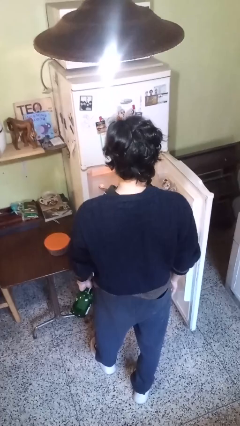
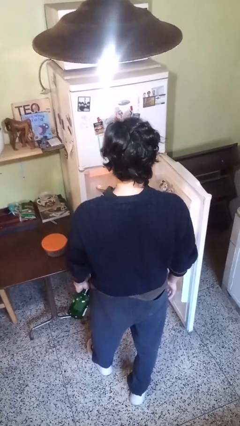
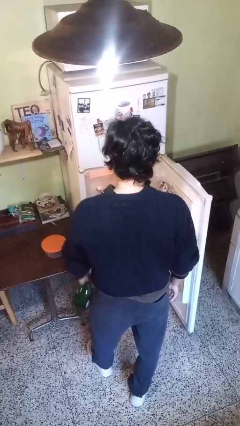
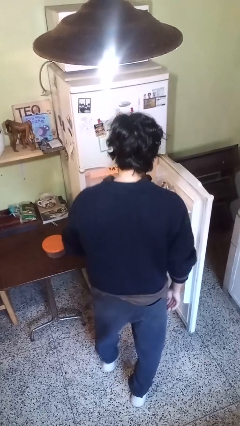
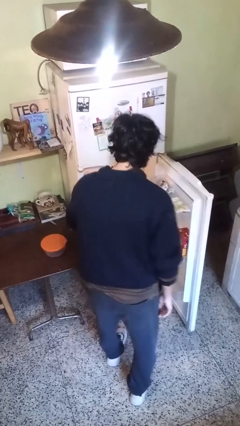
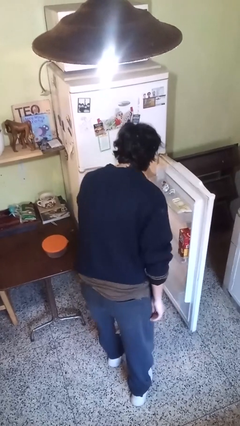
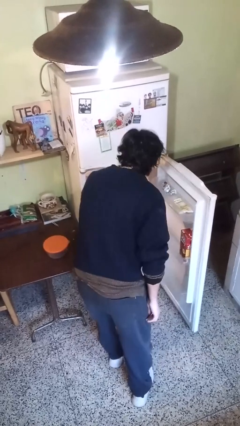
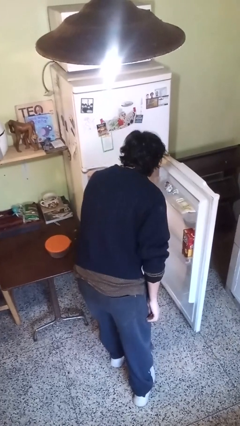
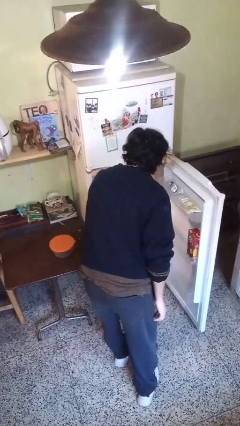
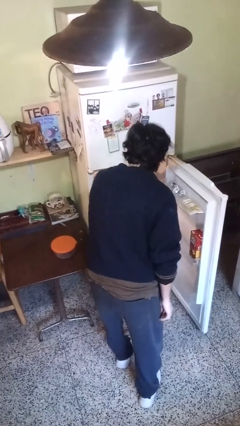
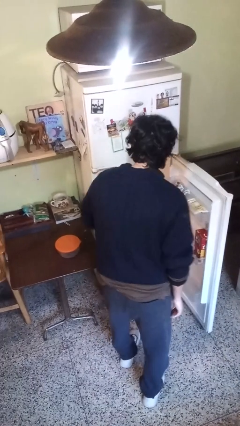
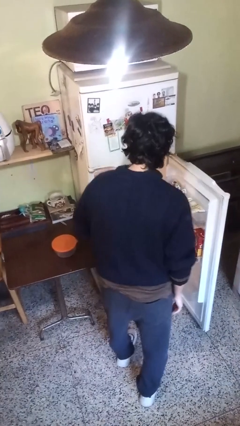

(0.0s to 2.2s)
person puts object into refrigerator

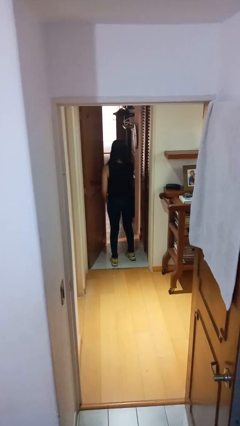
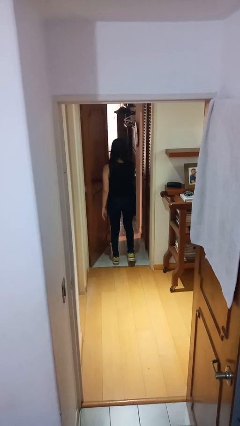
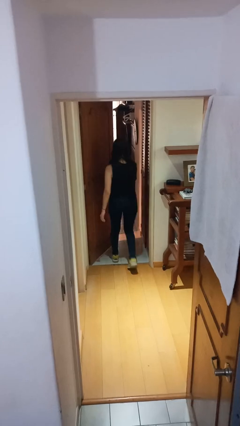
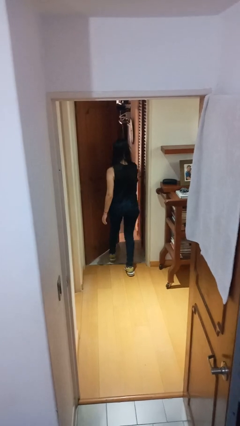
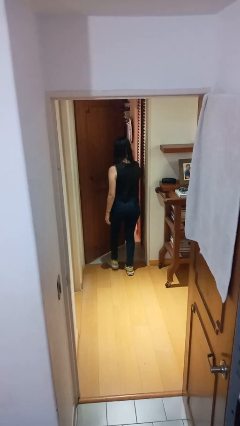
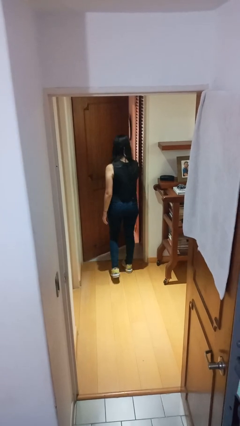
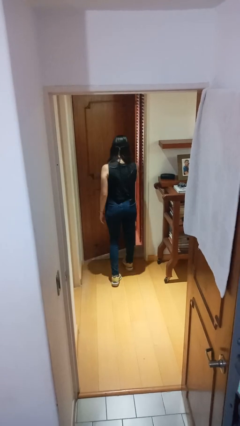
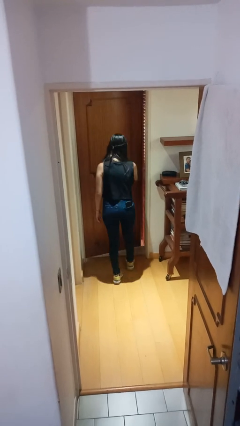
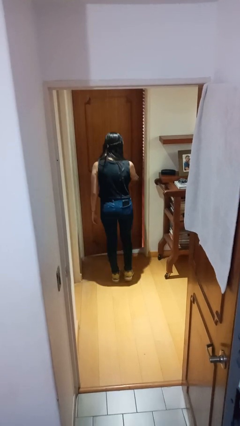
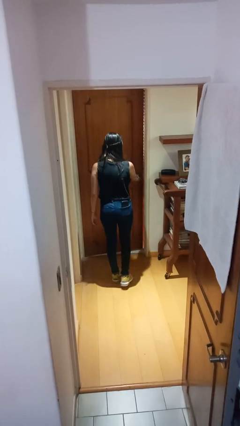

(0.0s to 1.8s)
person closes facility door

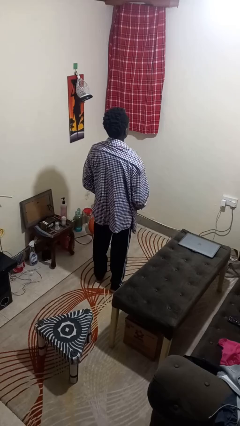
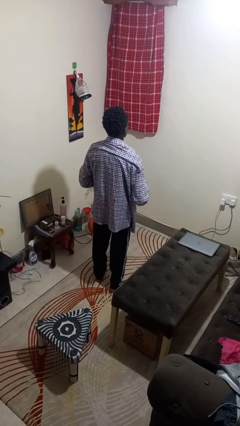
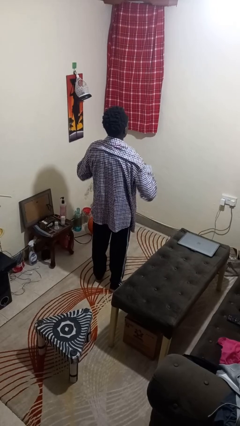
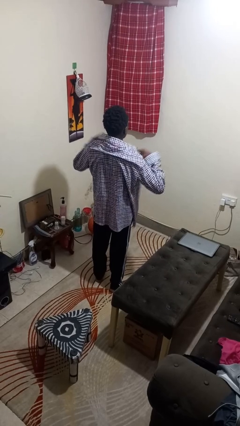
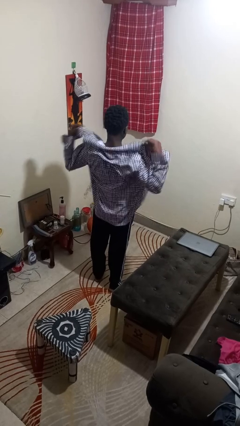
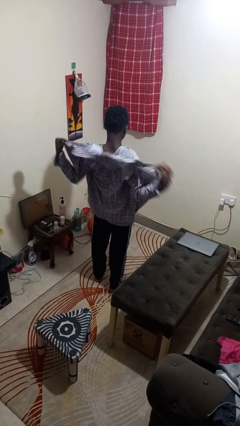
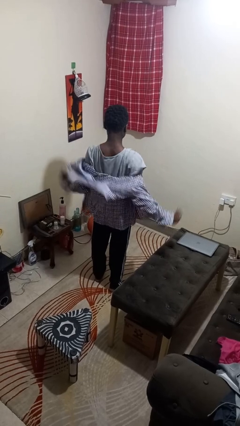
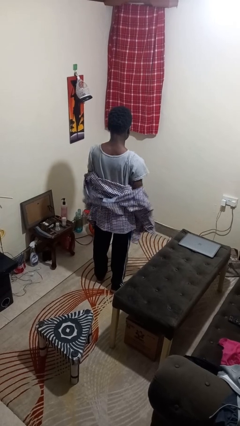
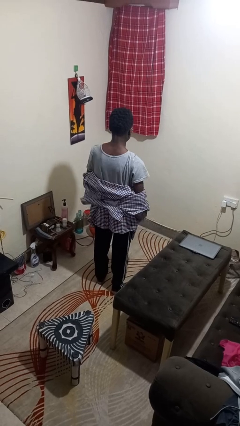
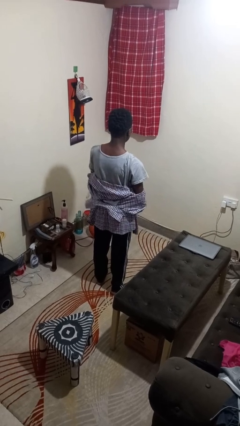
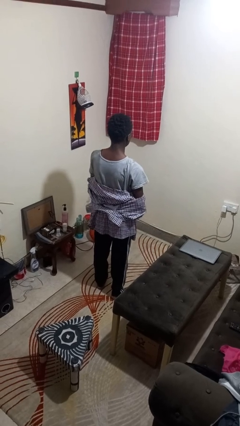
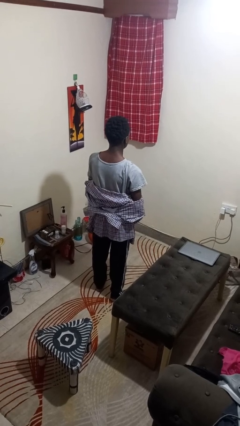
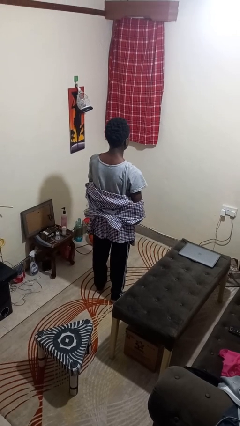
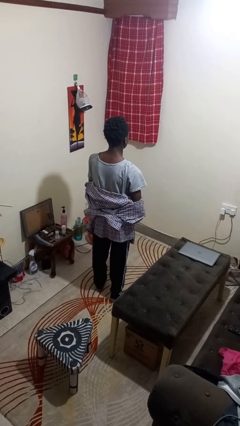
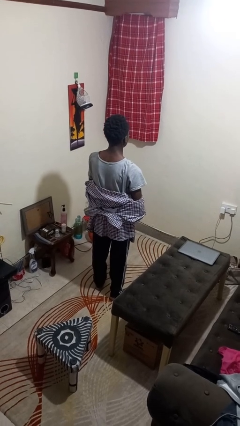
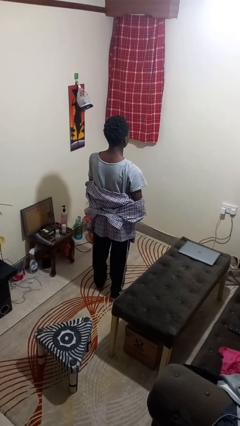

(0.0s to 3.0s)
person takes off shirt

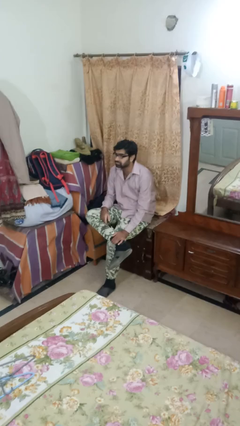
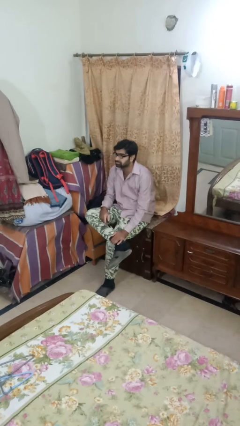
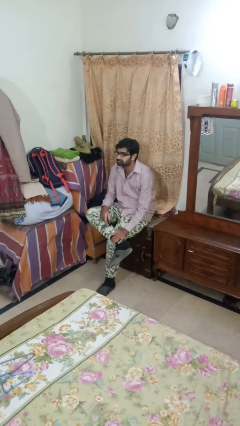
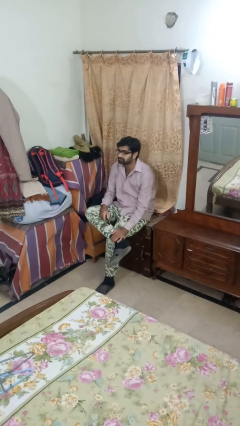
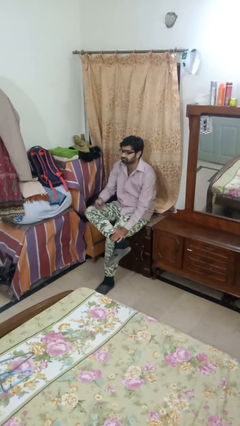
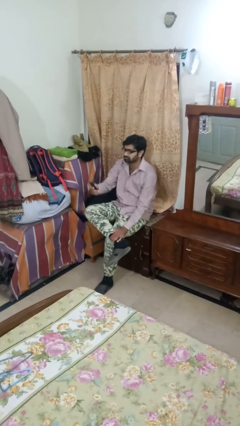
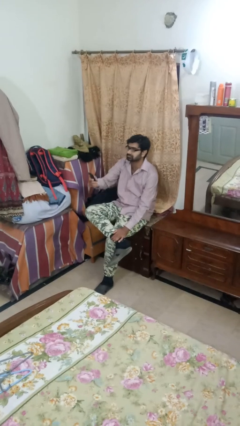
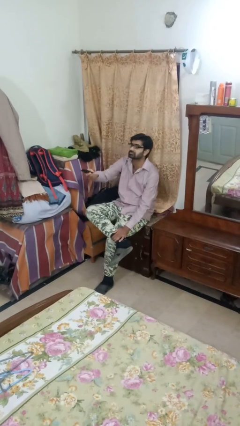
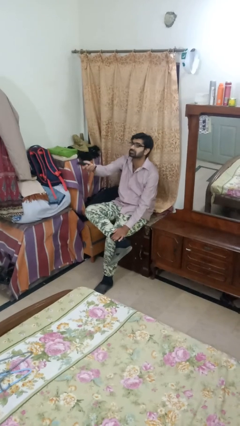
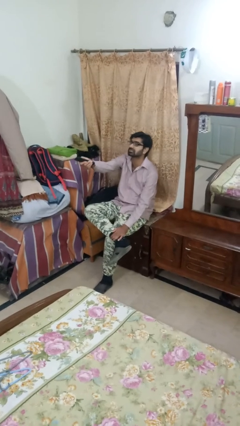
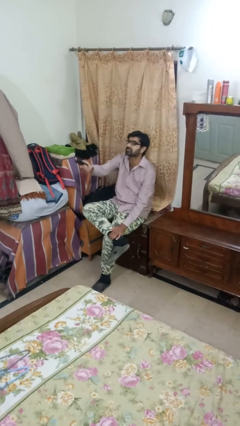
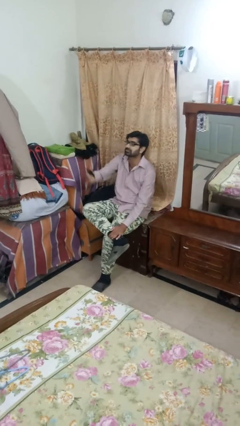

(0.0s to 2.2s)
person uses television remote

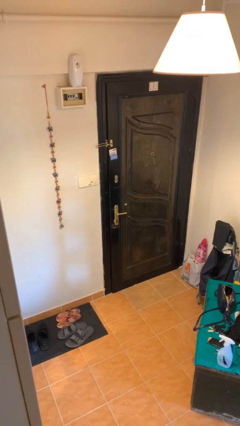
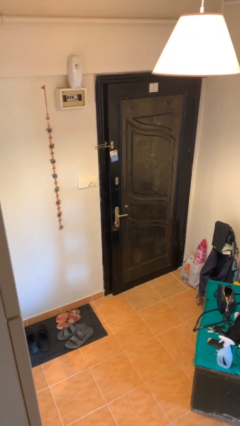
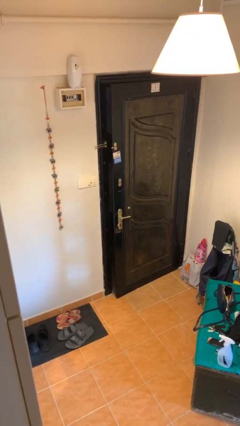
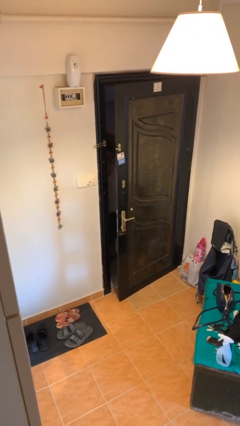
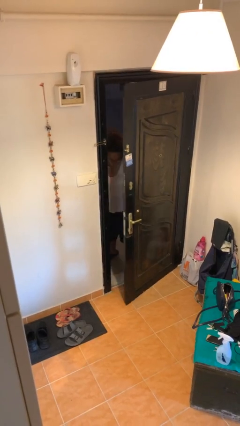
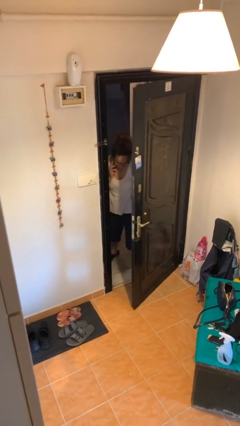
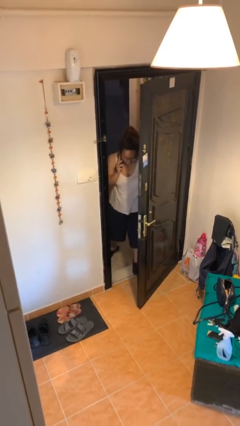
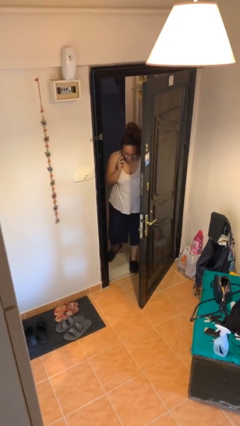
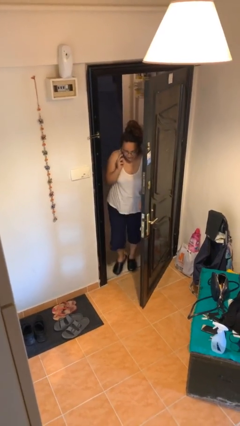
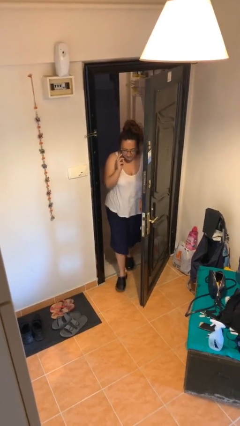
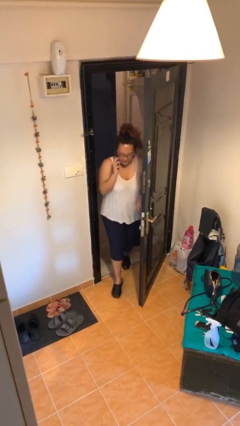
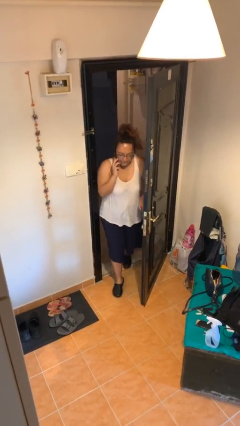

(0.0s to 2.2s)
person opens facility door

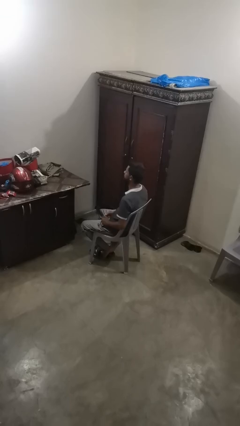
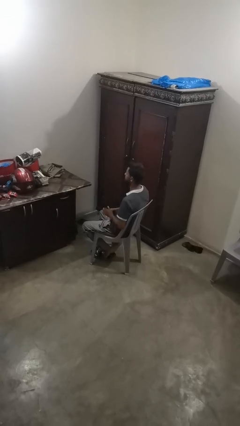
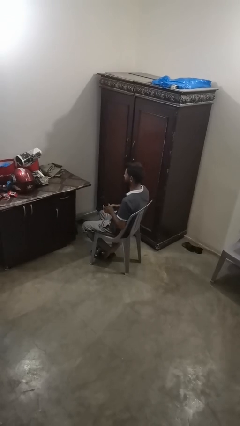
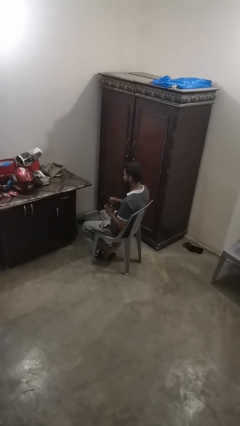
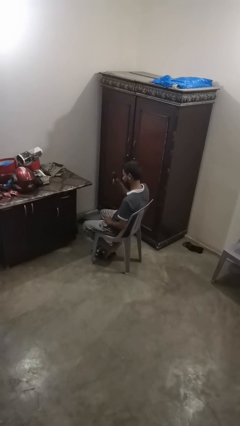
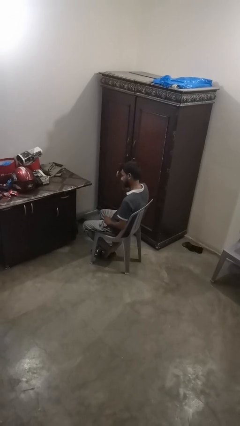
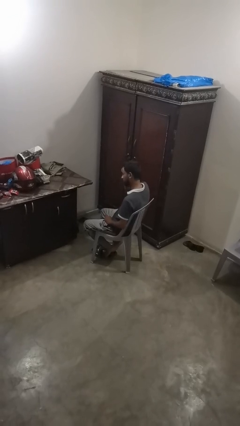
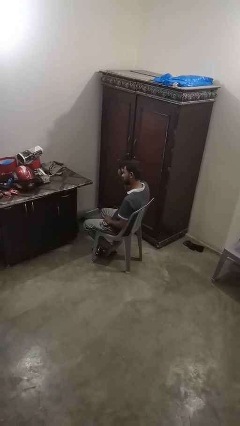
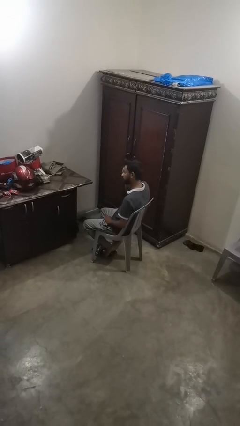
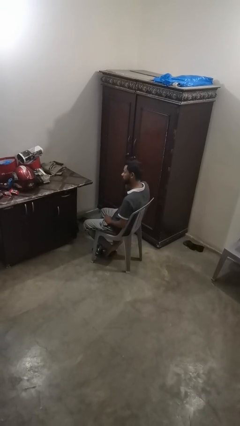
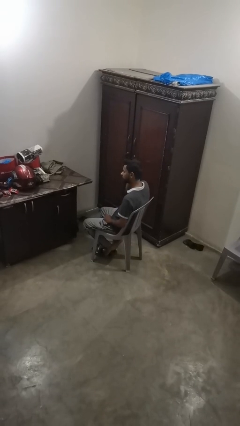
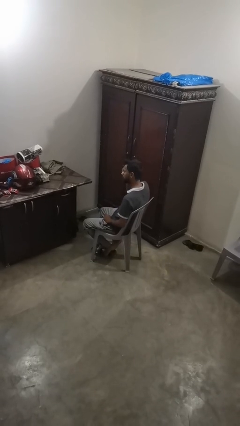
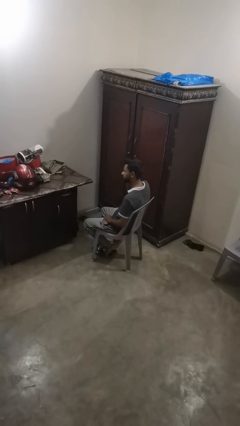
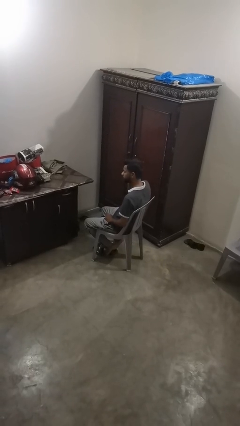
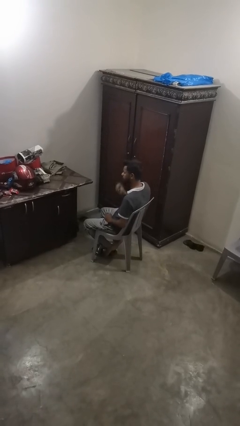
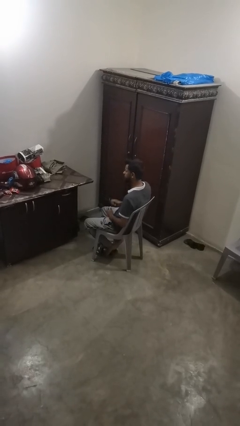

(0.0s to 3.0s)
person brushes hair

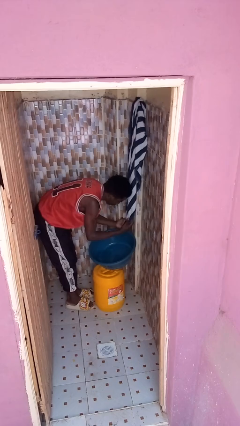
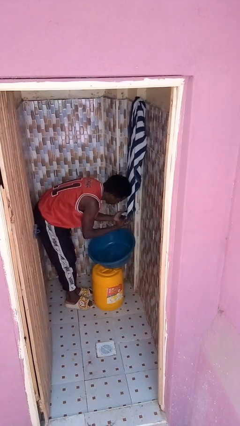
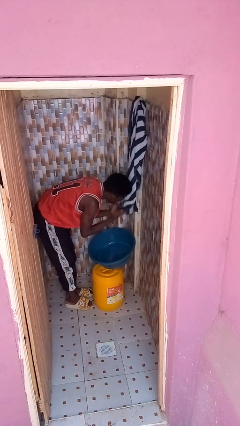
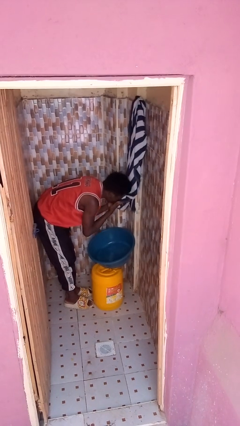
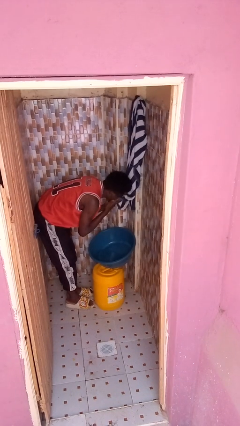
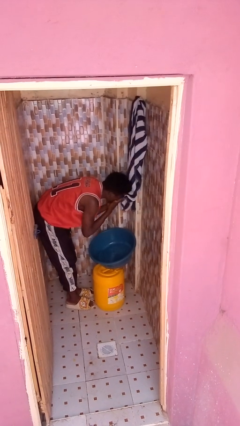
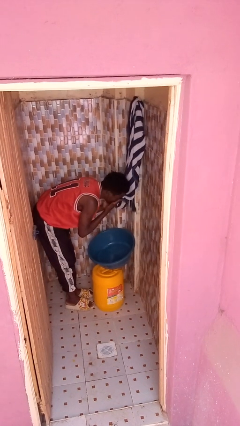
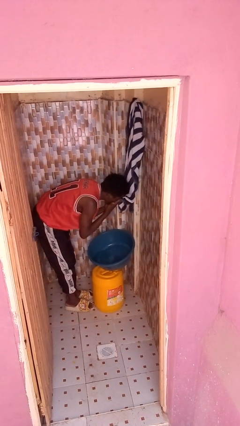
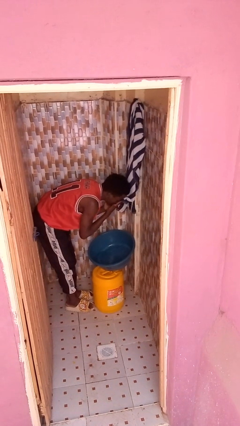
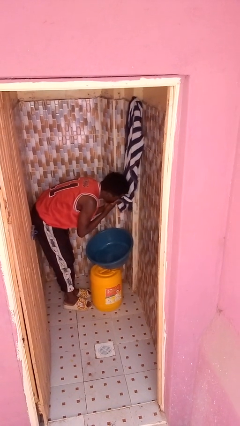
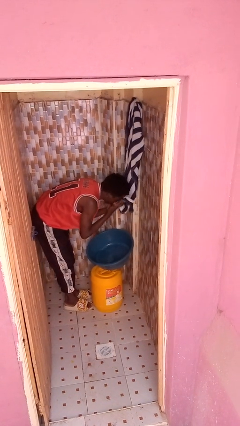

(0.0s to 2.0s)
person dries face with towel

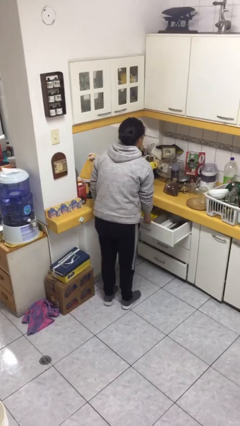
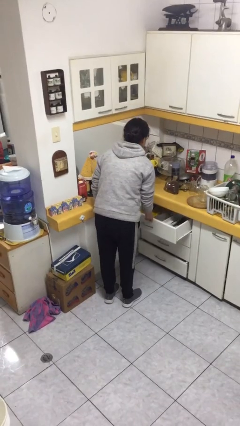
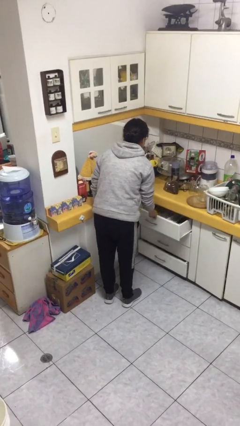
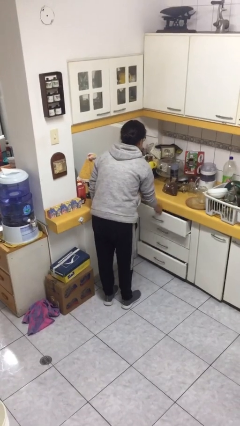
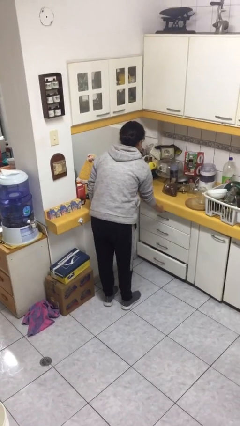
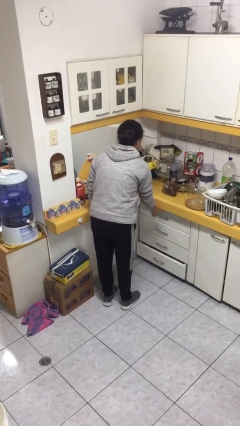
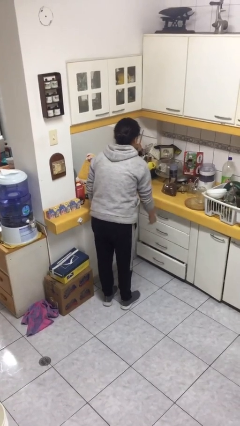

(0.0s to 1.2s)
person closes kitchen drawer
